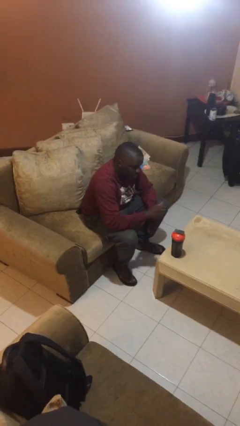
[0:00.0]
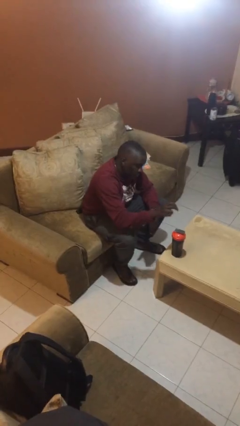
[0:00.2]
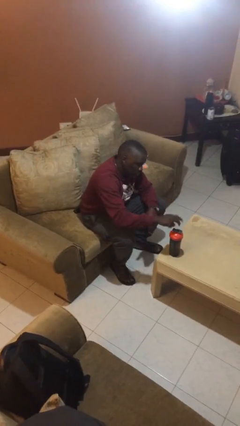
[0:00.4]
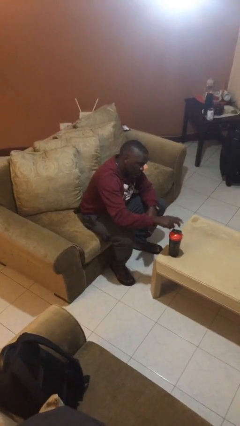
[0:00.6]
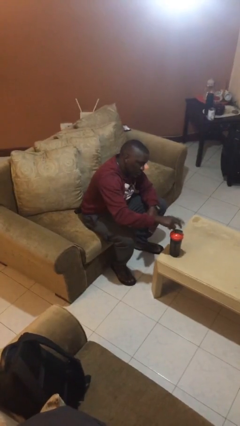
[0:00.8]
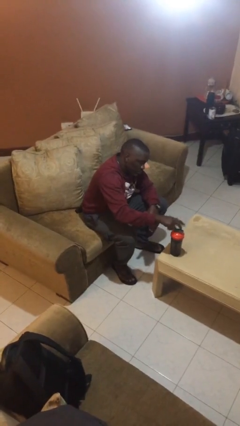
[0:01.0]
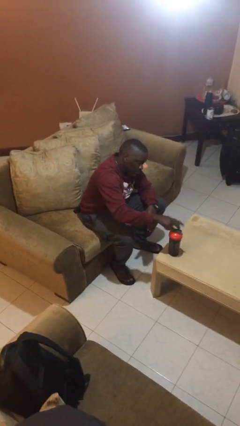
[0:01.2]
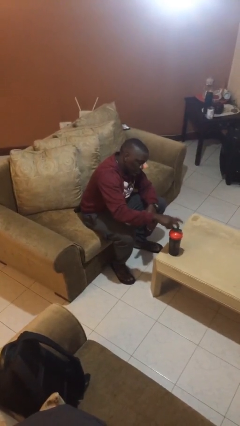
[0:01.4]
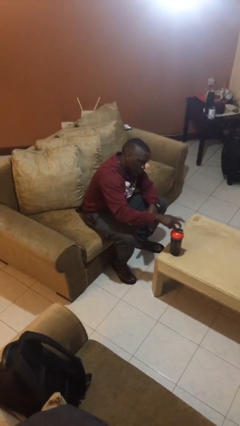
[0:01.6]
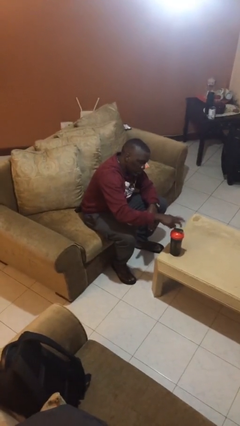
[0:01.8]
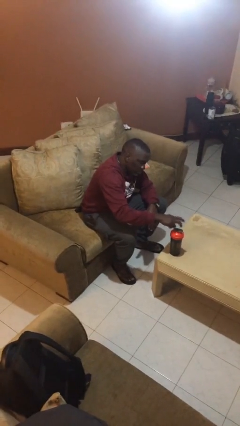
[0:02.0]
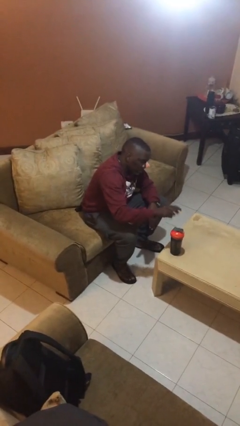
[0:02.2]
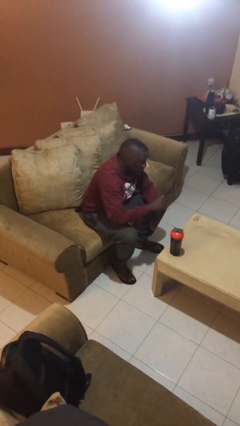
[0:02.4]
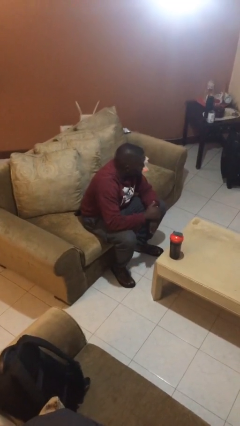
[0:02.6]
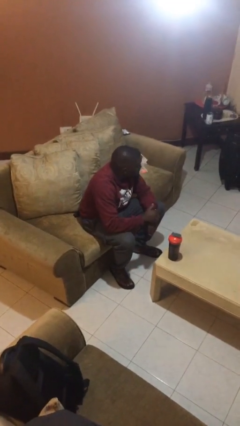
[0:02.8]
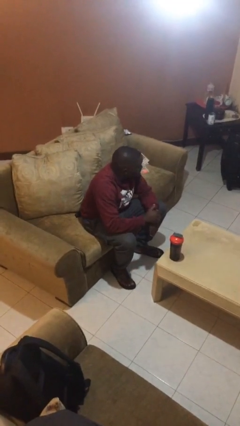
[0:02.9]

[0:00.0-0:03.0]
person taps object with finger

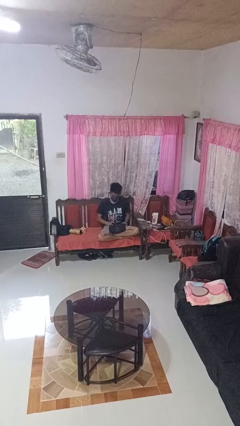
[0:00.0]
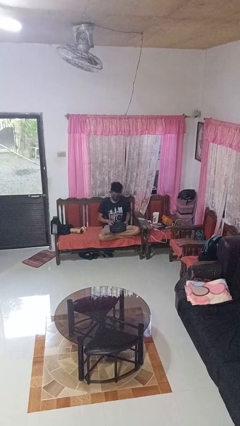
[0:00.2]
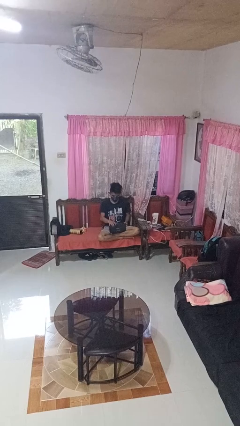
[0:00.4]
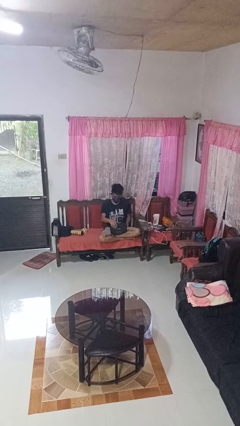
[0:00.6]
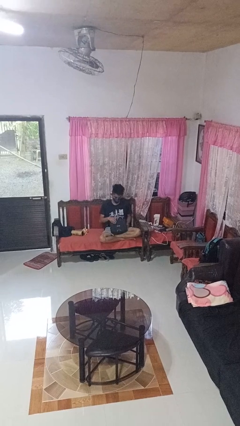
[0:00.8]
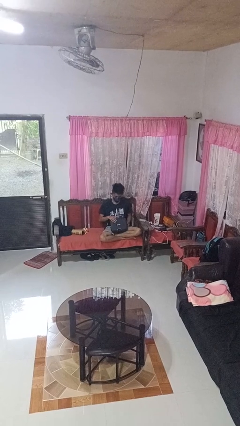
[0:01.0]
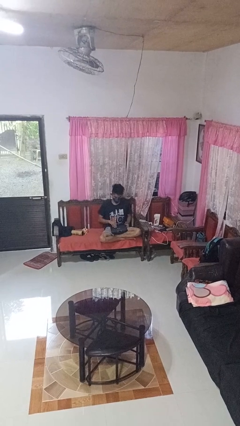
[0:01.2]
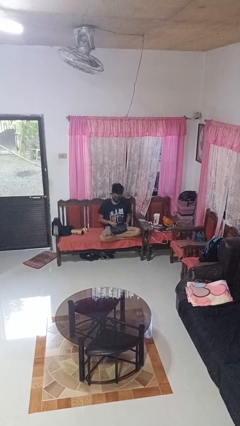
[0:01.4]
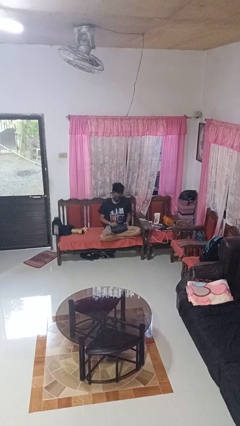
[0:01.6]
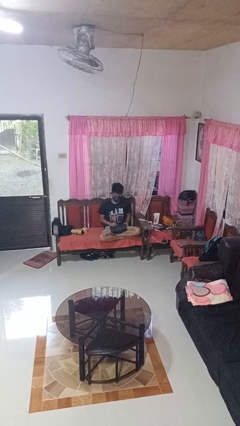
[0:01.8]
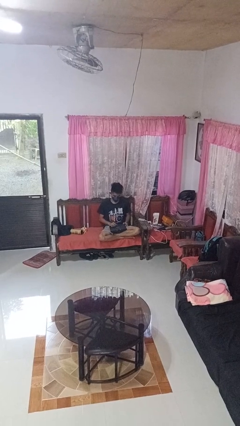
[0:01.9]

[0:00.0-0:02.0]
person closes laptop

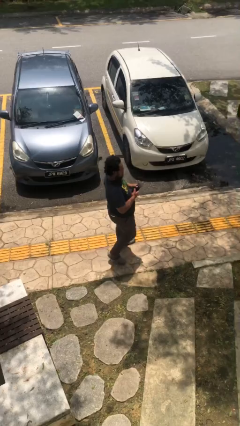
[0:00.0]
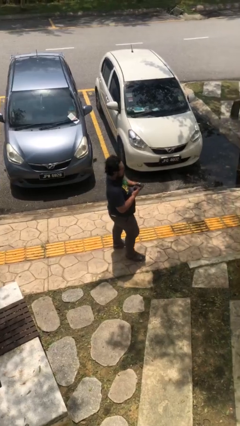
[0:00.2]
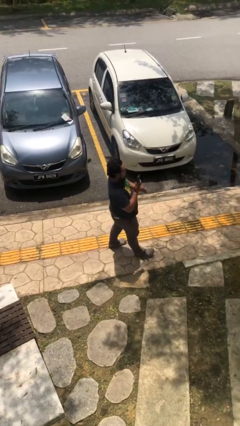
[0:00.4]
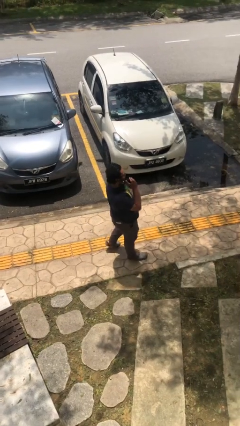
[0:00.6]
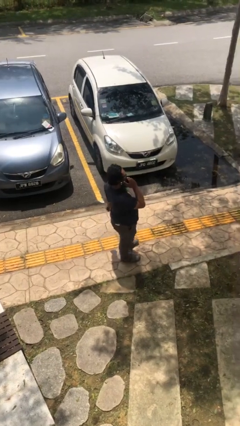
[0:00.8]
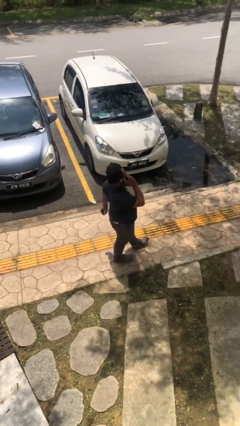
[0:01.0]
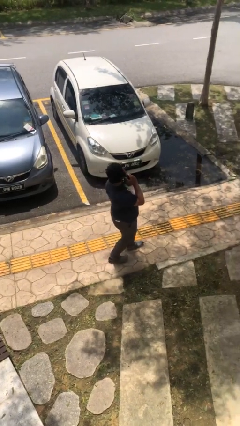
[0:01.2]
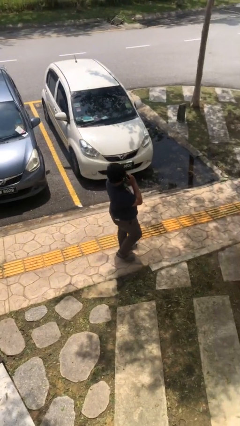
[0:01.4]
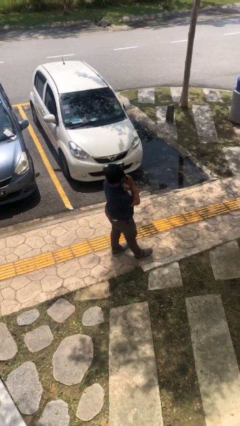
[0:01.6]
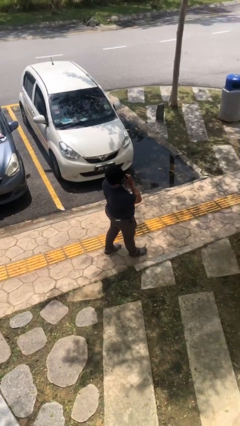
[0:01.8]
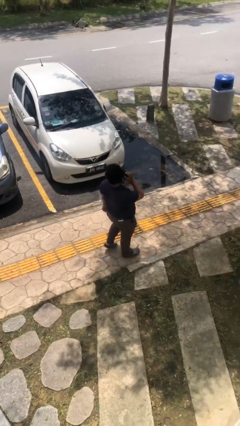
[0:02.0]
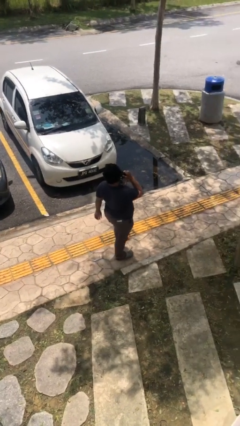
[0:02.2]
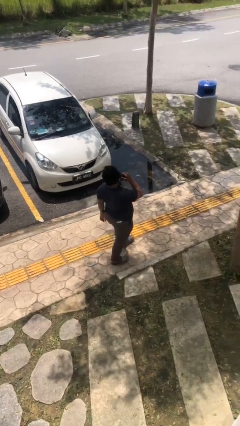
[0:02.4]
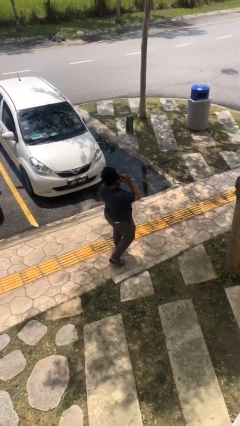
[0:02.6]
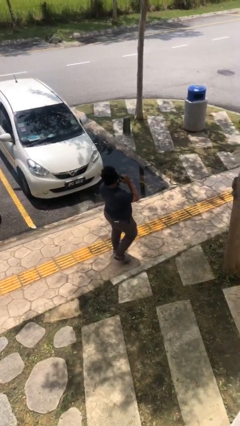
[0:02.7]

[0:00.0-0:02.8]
person talks on phone

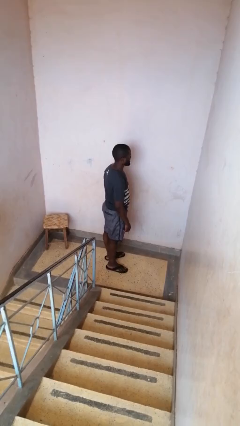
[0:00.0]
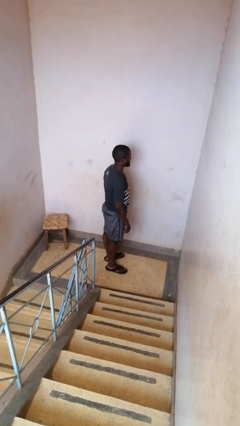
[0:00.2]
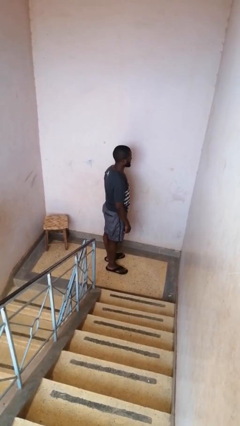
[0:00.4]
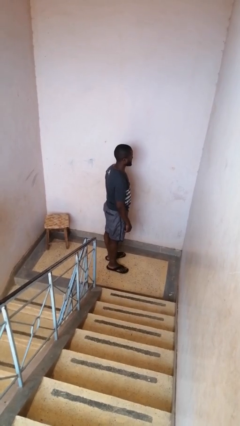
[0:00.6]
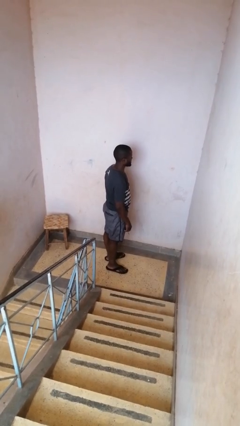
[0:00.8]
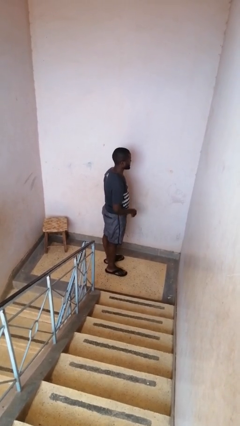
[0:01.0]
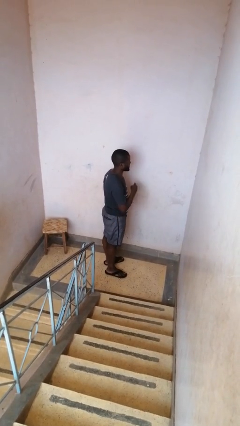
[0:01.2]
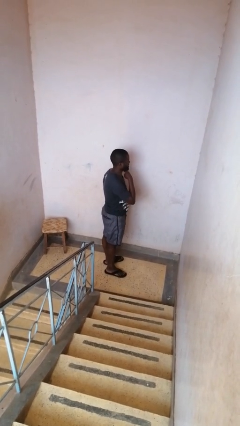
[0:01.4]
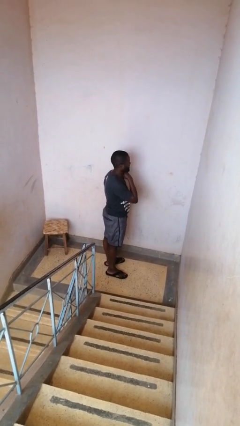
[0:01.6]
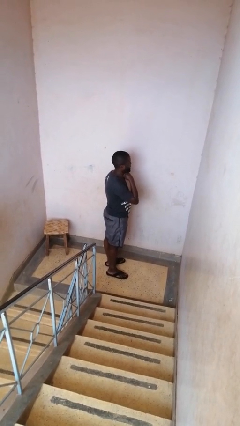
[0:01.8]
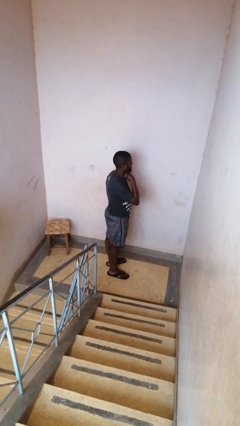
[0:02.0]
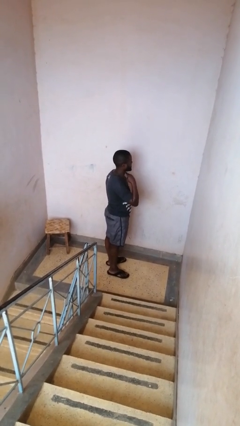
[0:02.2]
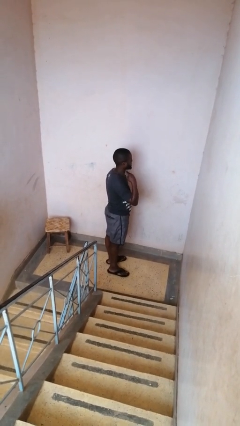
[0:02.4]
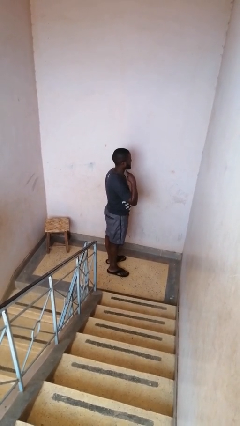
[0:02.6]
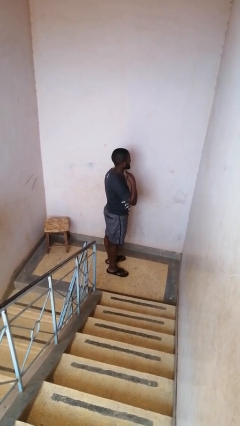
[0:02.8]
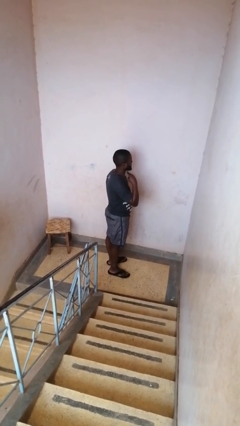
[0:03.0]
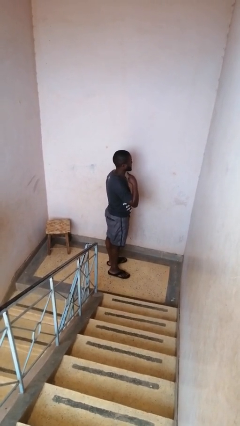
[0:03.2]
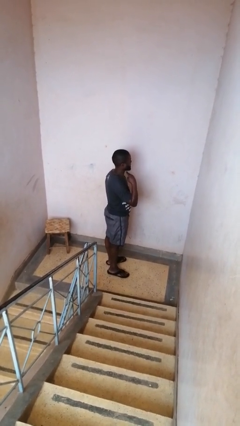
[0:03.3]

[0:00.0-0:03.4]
person gestures cut

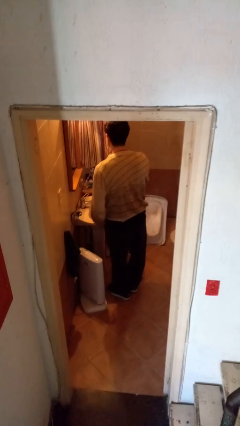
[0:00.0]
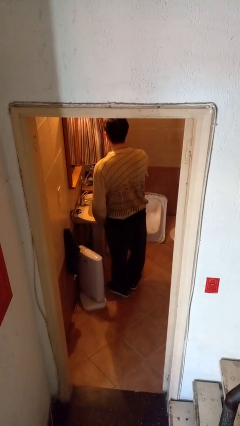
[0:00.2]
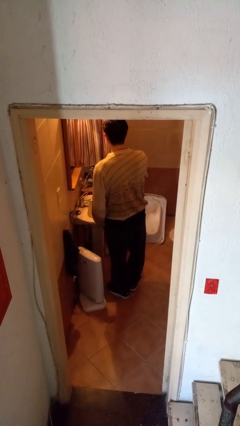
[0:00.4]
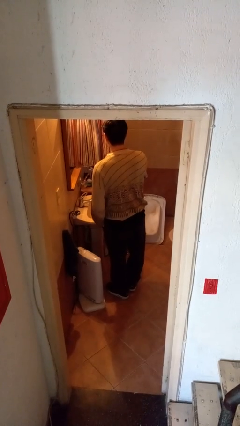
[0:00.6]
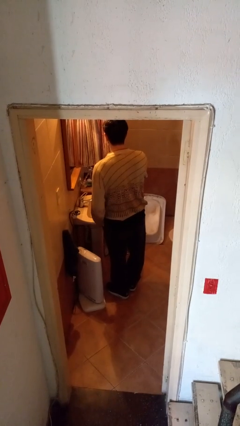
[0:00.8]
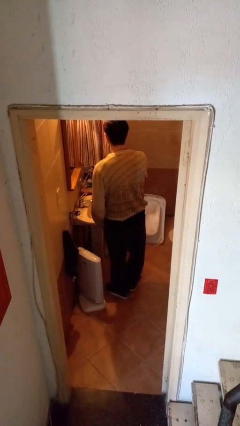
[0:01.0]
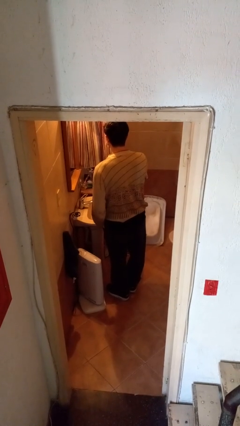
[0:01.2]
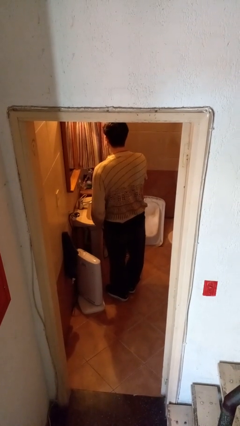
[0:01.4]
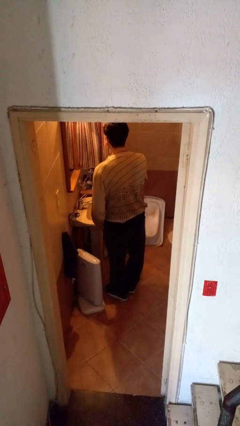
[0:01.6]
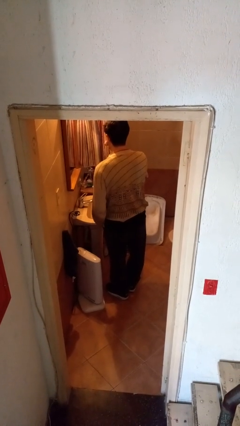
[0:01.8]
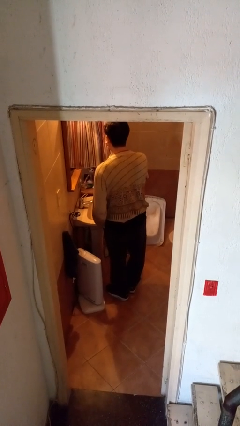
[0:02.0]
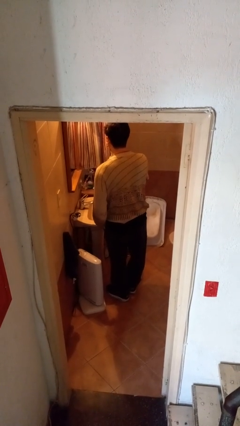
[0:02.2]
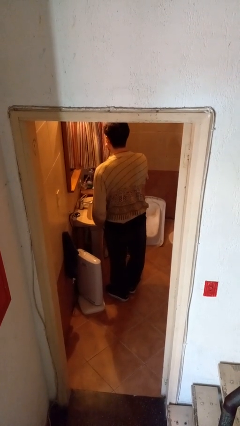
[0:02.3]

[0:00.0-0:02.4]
person brushes teeth

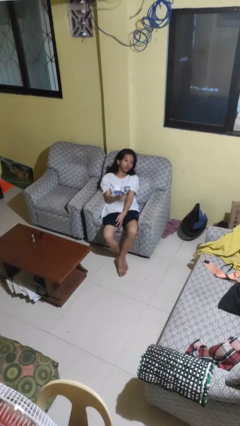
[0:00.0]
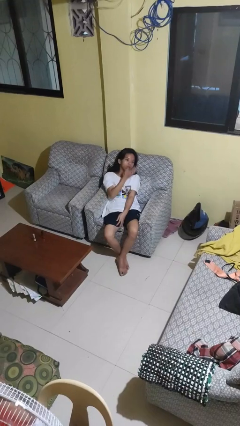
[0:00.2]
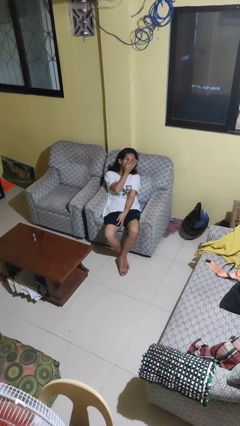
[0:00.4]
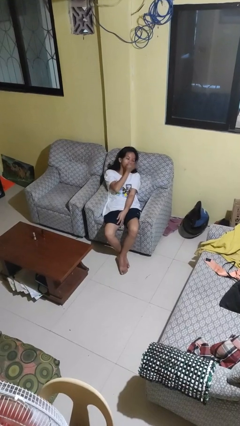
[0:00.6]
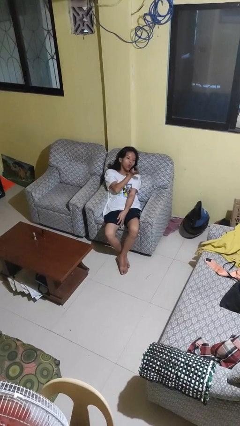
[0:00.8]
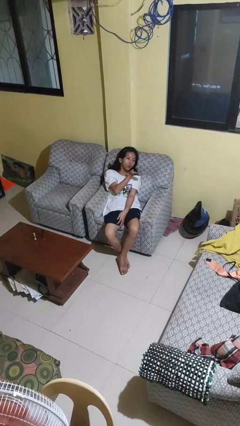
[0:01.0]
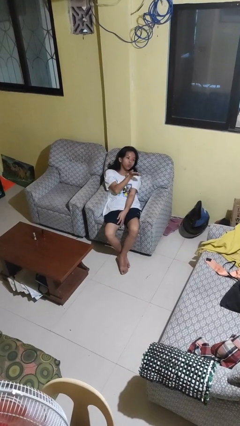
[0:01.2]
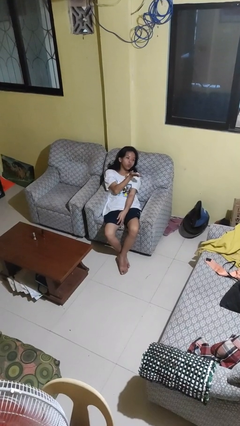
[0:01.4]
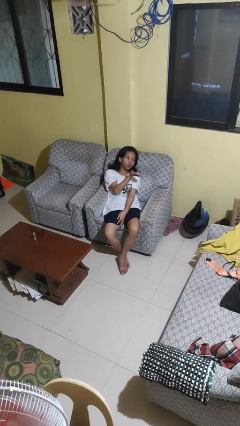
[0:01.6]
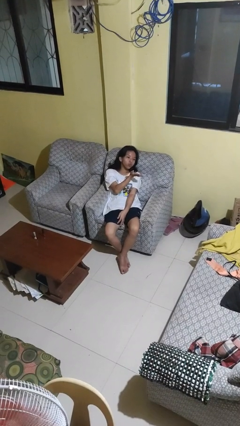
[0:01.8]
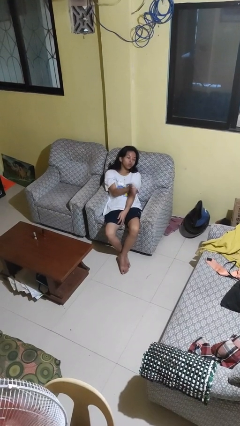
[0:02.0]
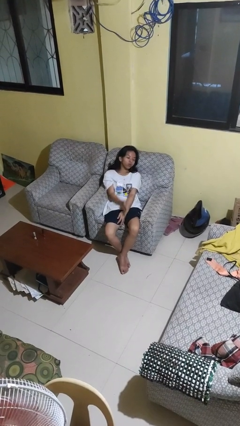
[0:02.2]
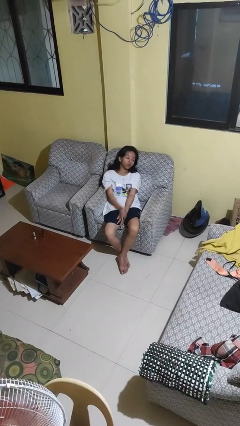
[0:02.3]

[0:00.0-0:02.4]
person gestures blow kiss

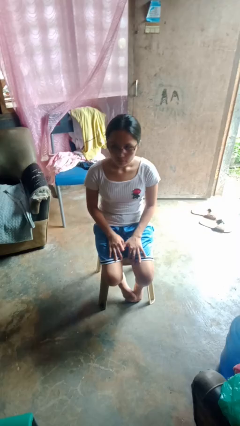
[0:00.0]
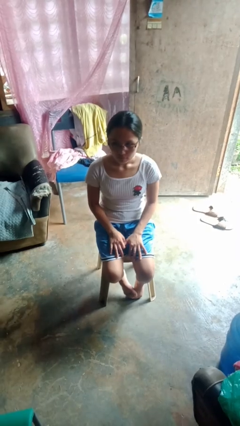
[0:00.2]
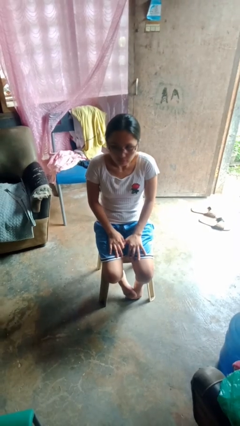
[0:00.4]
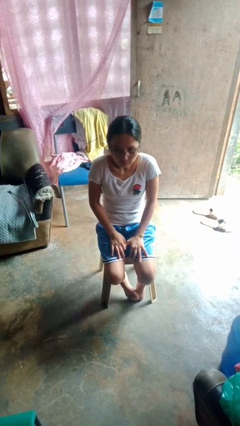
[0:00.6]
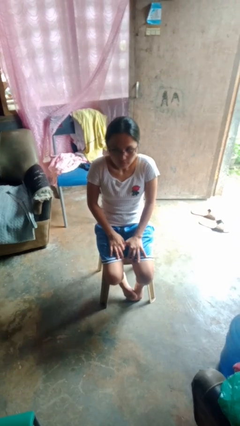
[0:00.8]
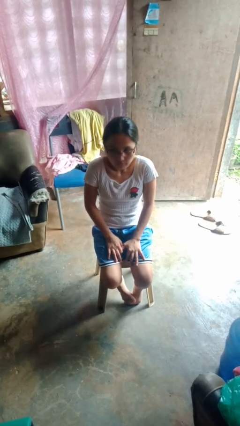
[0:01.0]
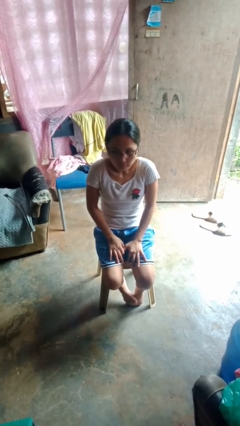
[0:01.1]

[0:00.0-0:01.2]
person shrugs
